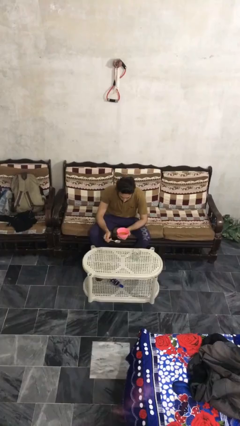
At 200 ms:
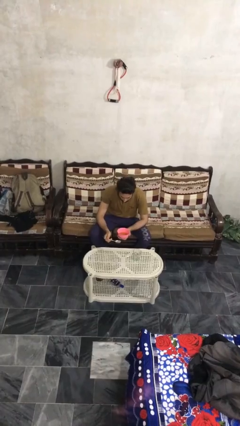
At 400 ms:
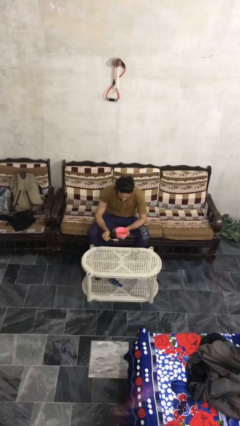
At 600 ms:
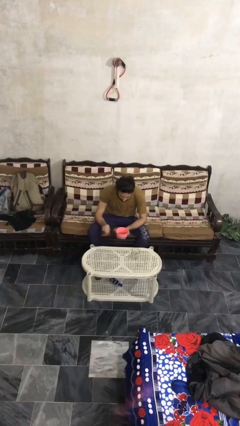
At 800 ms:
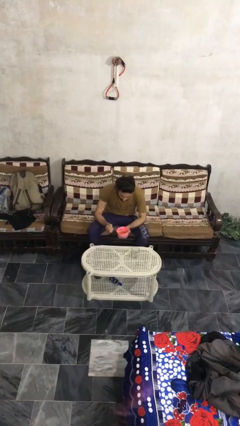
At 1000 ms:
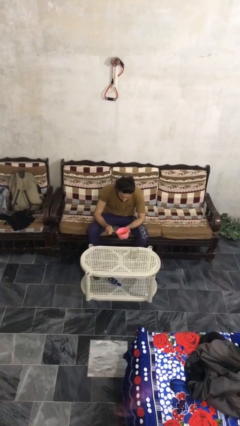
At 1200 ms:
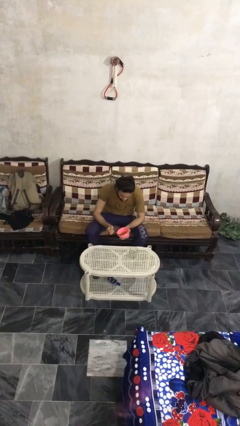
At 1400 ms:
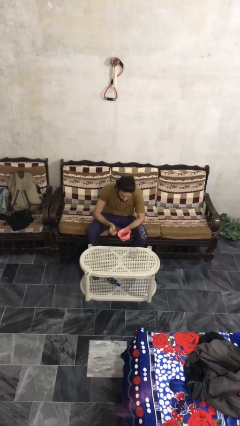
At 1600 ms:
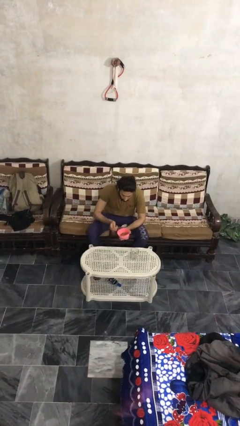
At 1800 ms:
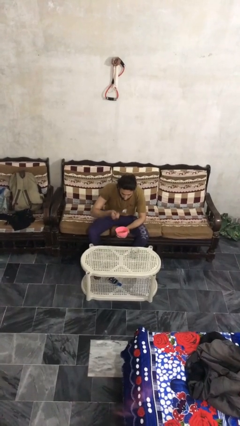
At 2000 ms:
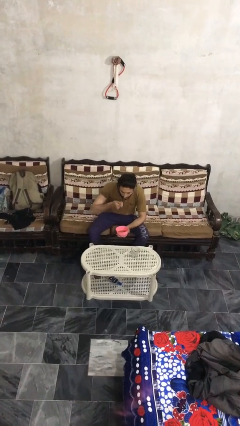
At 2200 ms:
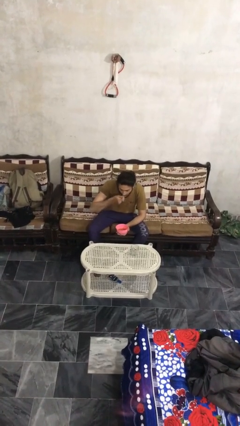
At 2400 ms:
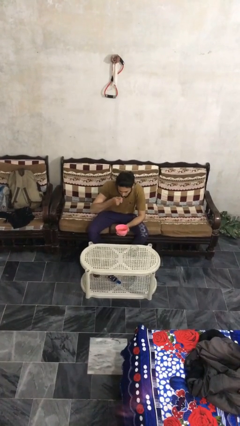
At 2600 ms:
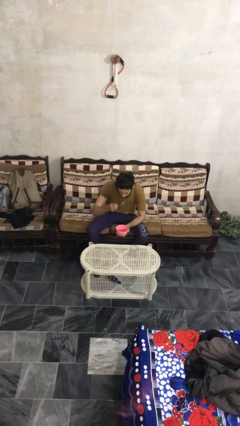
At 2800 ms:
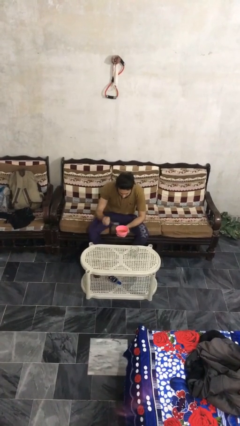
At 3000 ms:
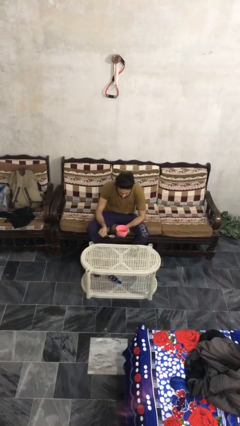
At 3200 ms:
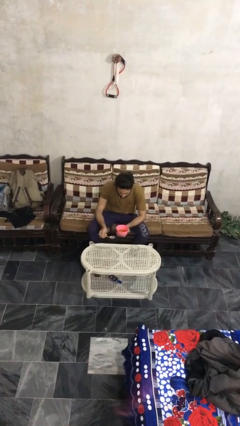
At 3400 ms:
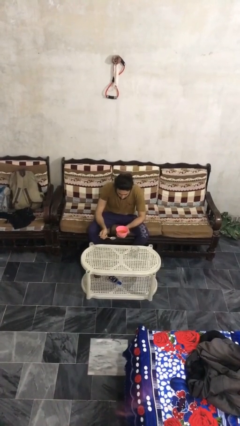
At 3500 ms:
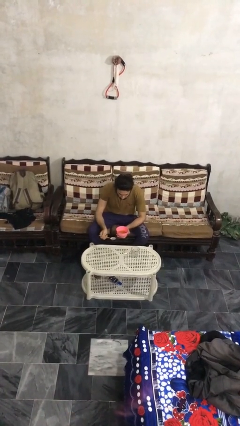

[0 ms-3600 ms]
person eats with utensil

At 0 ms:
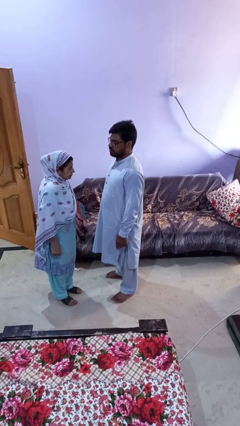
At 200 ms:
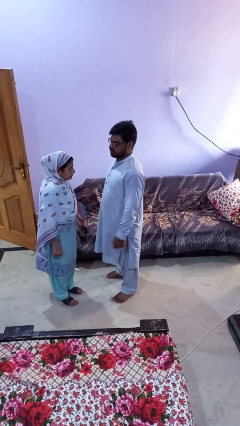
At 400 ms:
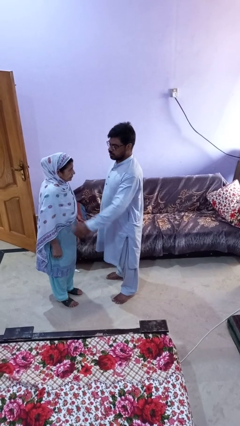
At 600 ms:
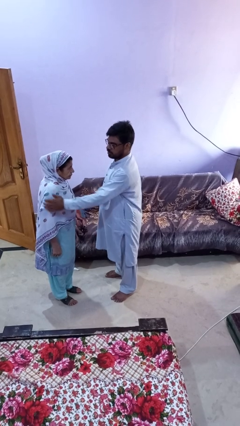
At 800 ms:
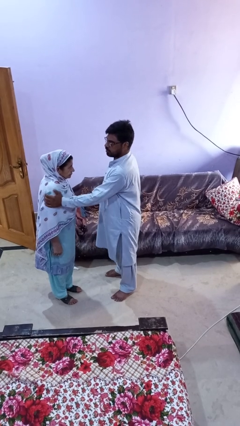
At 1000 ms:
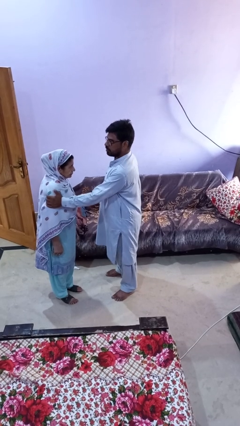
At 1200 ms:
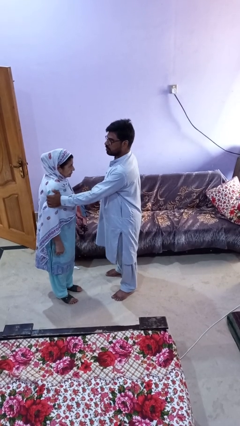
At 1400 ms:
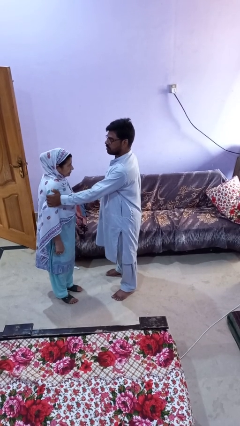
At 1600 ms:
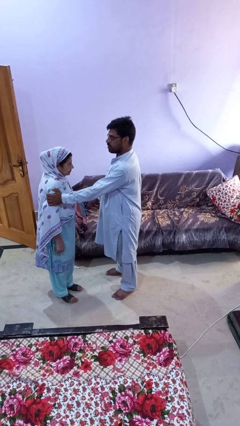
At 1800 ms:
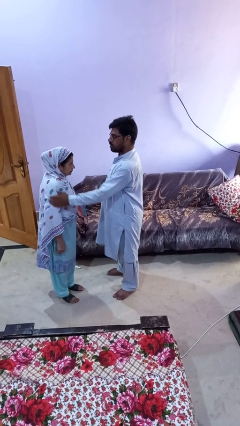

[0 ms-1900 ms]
person grabs person by bicep

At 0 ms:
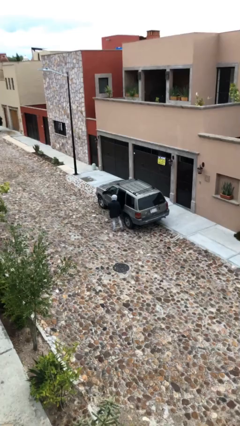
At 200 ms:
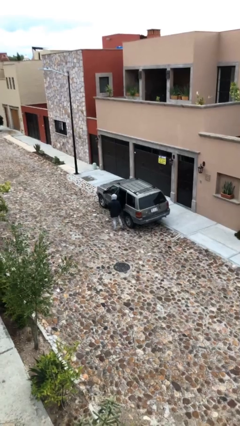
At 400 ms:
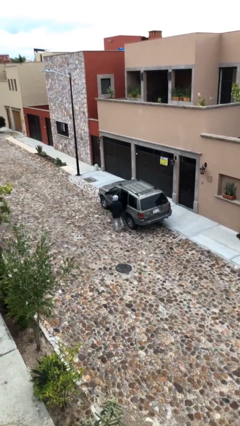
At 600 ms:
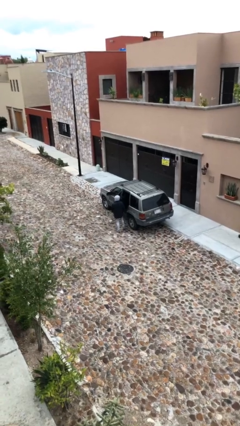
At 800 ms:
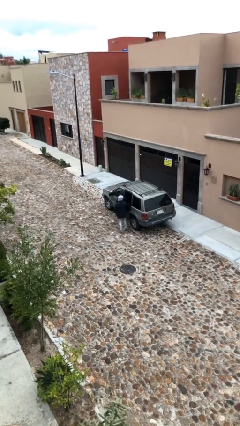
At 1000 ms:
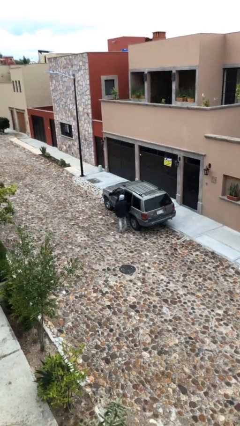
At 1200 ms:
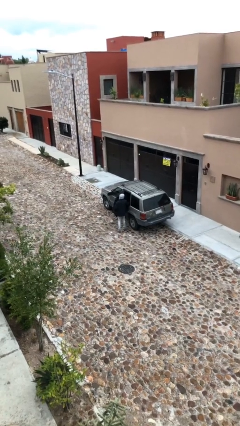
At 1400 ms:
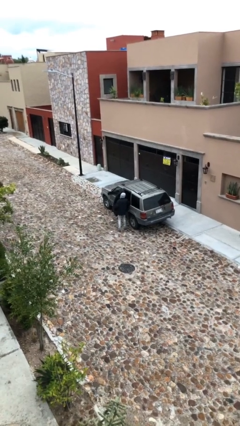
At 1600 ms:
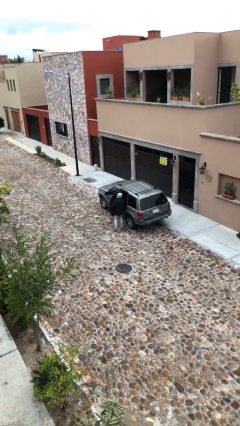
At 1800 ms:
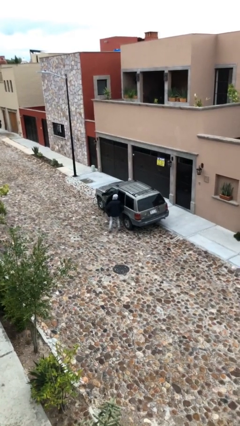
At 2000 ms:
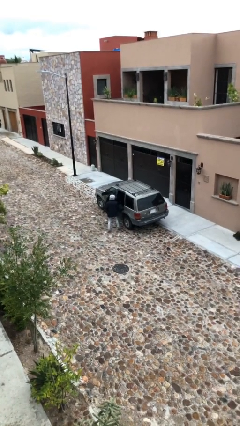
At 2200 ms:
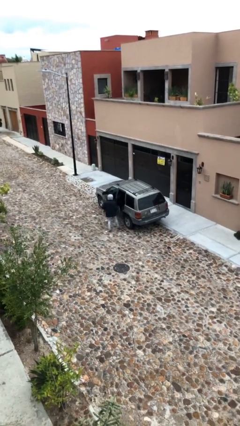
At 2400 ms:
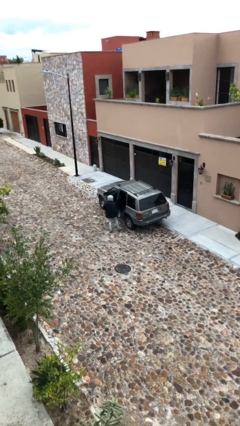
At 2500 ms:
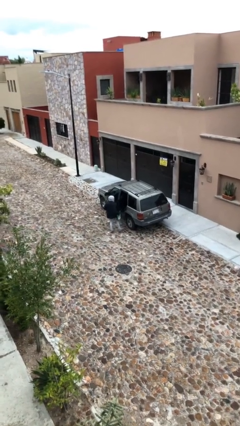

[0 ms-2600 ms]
person unloads car

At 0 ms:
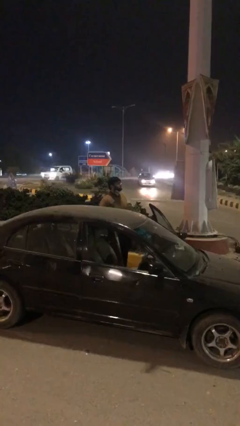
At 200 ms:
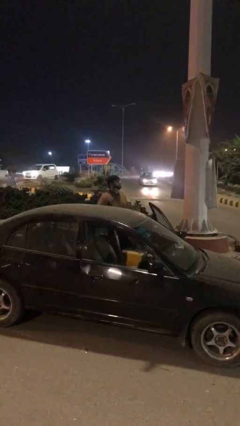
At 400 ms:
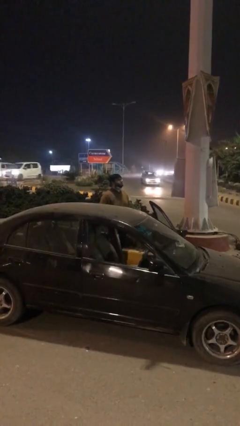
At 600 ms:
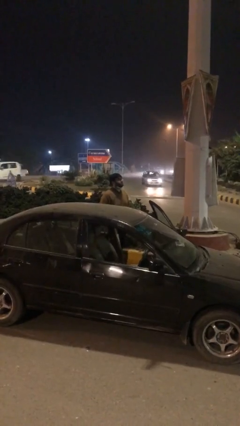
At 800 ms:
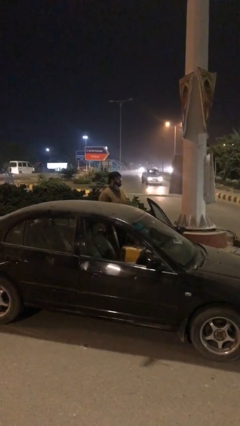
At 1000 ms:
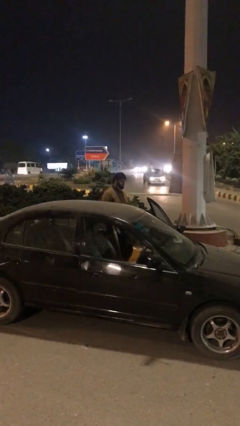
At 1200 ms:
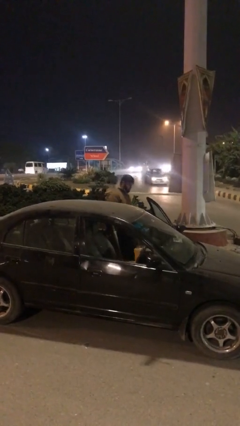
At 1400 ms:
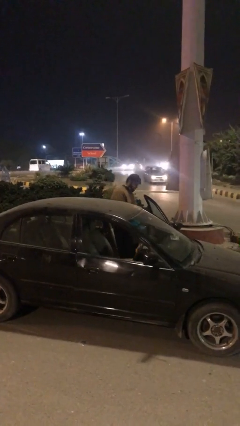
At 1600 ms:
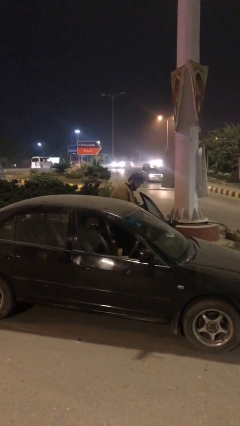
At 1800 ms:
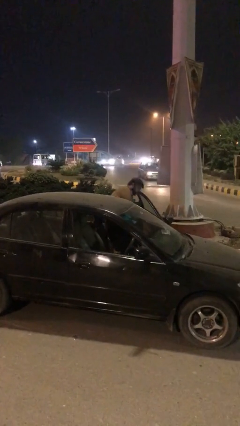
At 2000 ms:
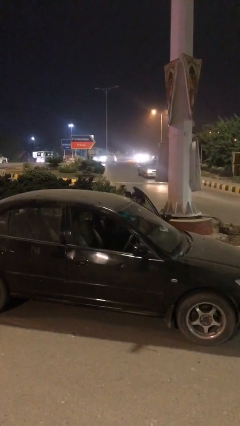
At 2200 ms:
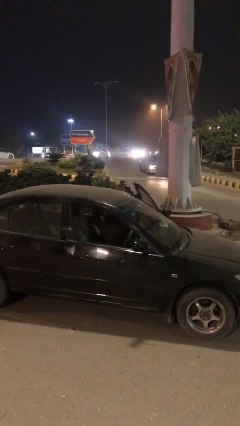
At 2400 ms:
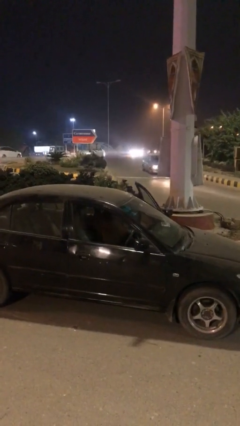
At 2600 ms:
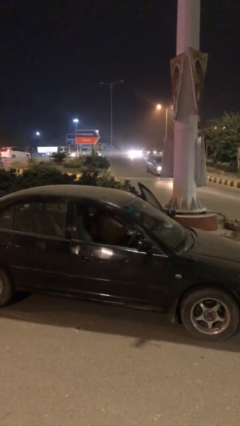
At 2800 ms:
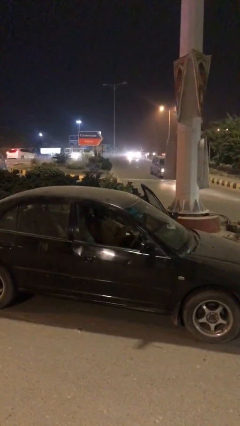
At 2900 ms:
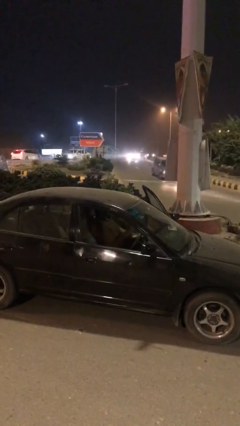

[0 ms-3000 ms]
person enters car

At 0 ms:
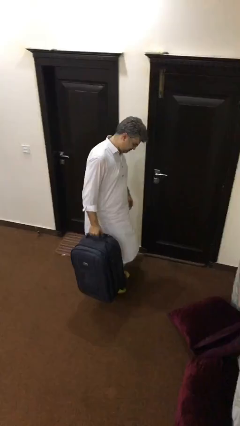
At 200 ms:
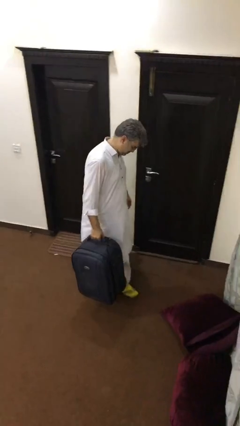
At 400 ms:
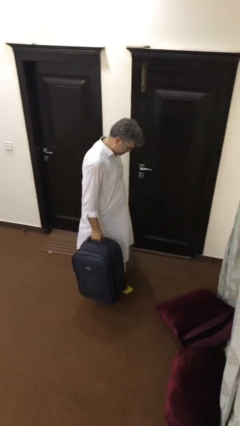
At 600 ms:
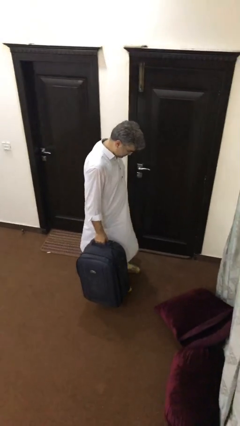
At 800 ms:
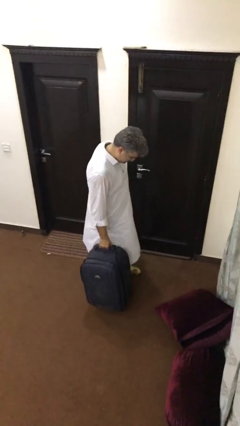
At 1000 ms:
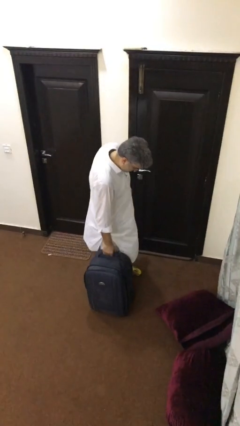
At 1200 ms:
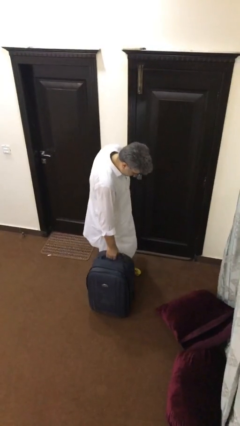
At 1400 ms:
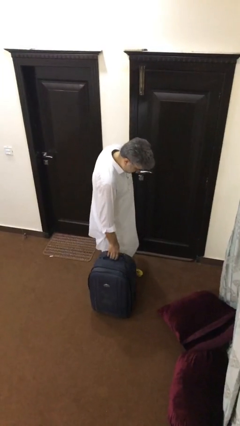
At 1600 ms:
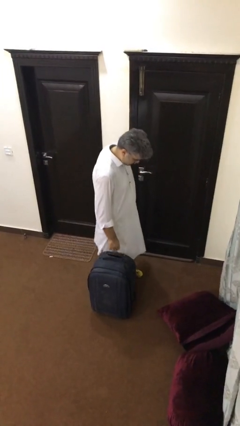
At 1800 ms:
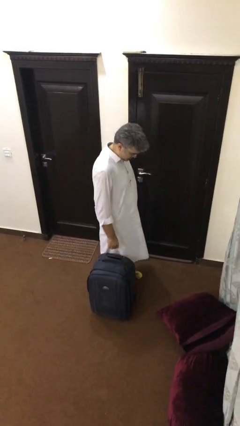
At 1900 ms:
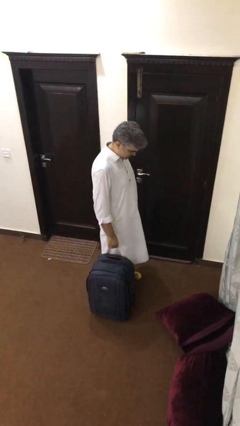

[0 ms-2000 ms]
person puts down object on floor

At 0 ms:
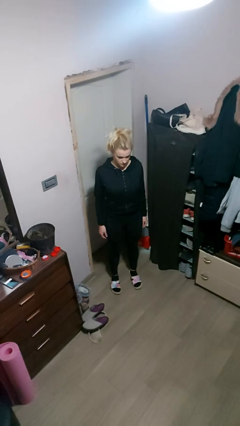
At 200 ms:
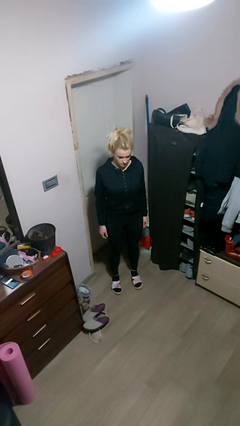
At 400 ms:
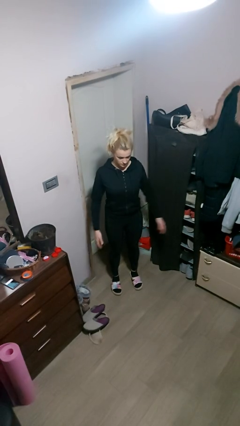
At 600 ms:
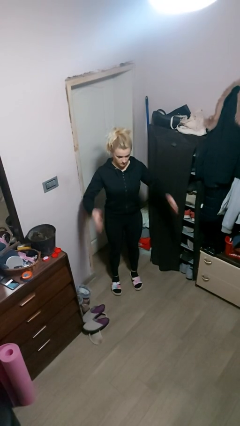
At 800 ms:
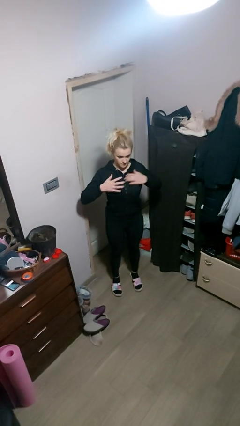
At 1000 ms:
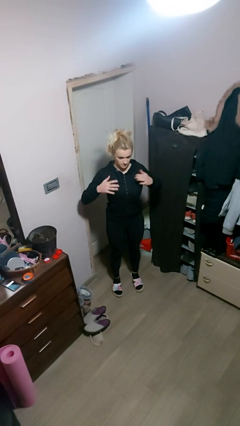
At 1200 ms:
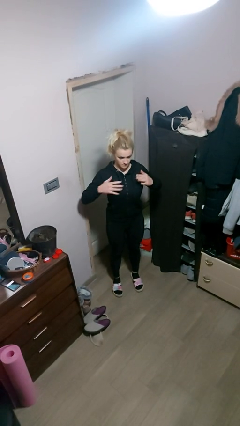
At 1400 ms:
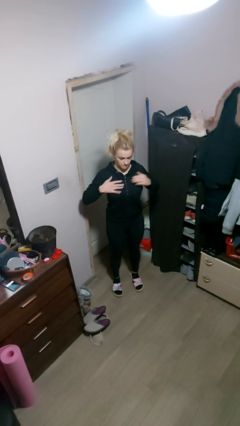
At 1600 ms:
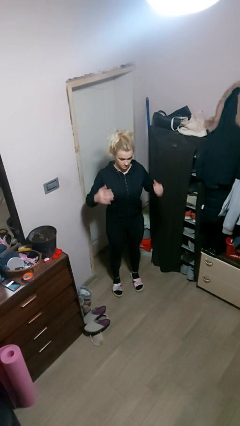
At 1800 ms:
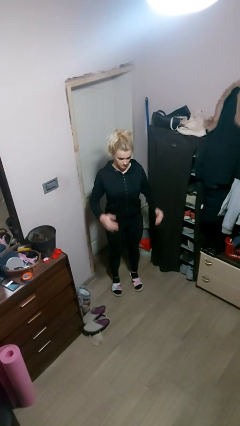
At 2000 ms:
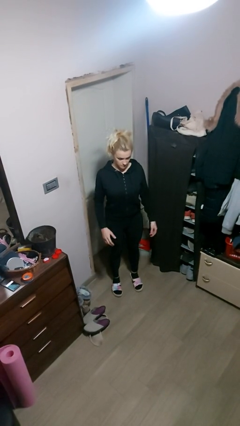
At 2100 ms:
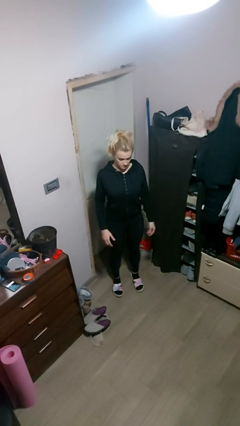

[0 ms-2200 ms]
person drums on chest

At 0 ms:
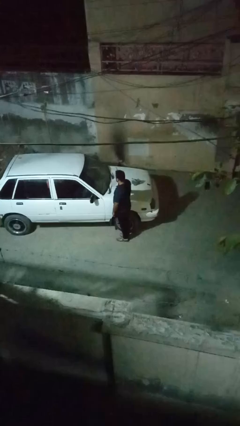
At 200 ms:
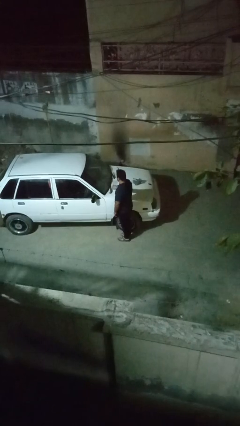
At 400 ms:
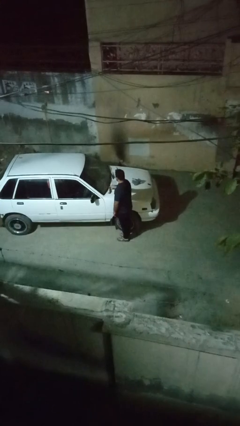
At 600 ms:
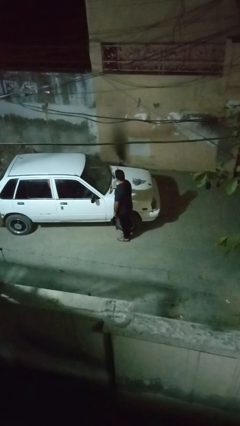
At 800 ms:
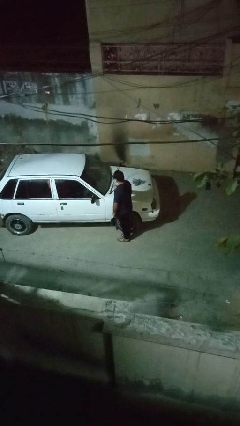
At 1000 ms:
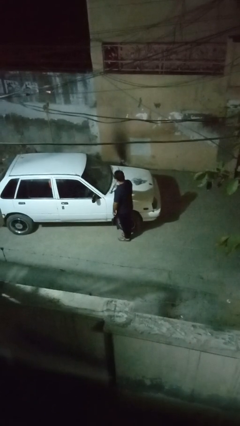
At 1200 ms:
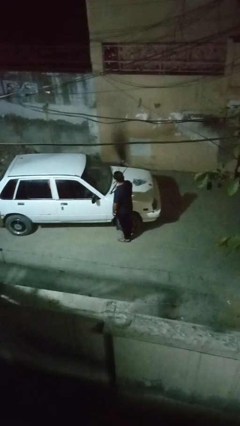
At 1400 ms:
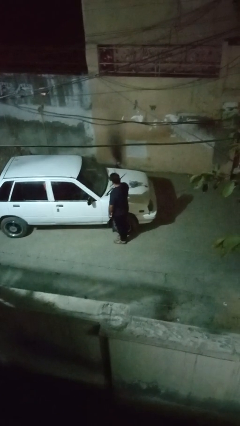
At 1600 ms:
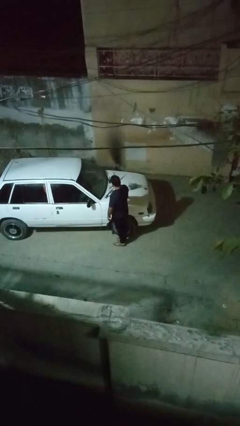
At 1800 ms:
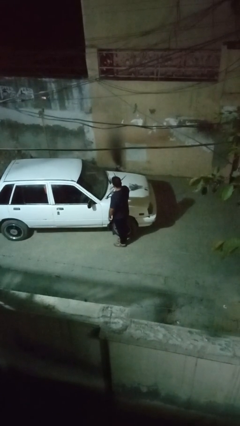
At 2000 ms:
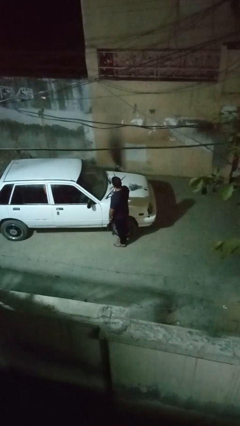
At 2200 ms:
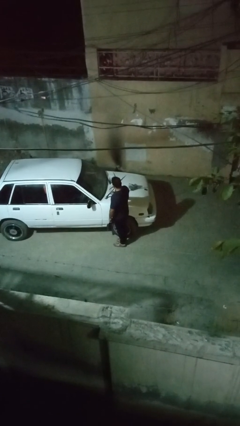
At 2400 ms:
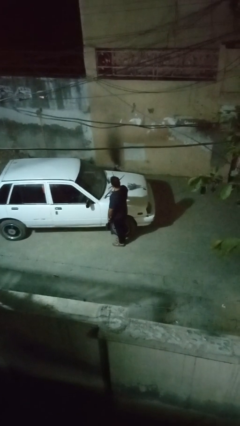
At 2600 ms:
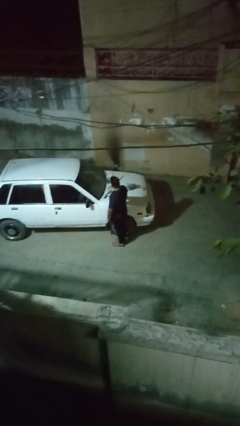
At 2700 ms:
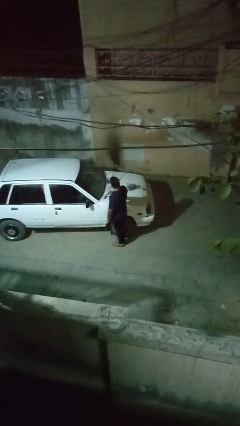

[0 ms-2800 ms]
person flips up car wipers
